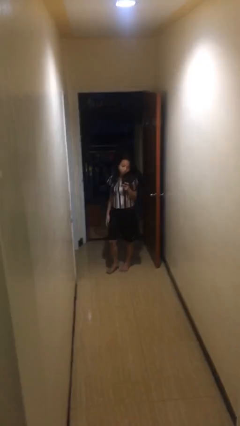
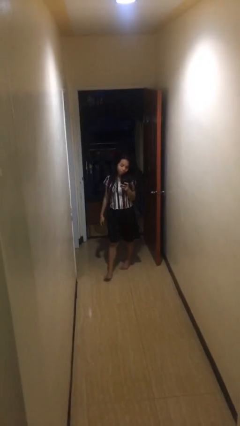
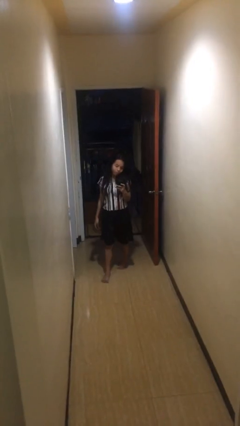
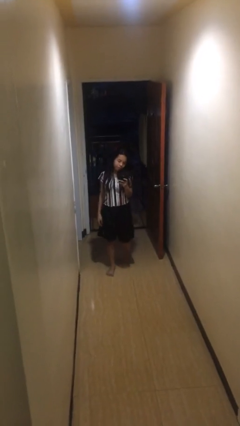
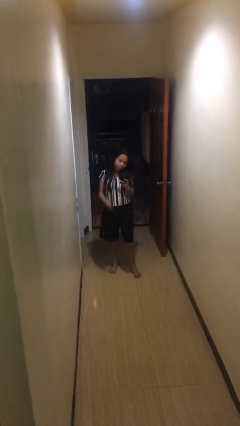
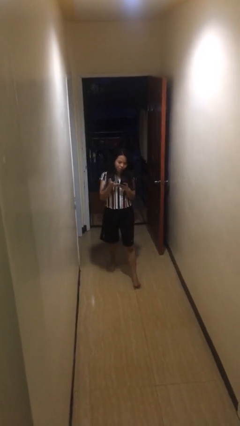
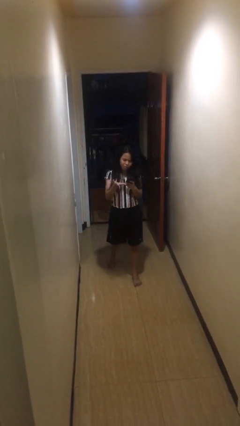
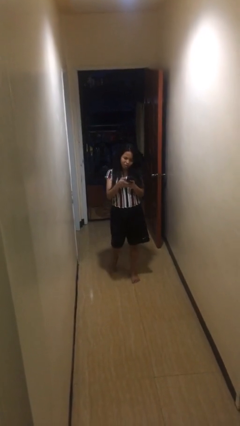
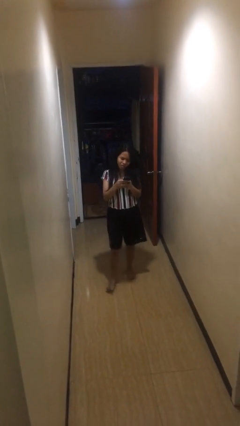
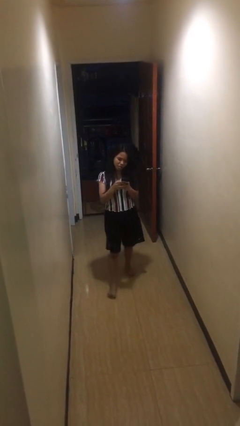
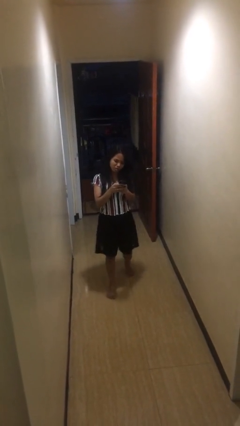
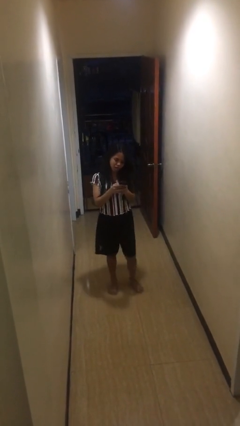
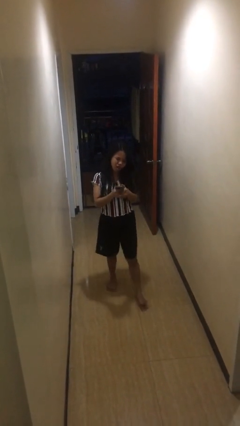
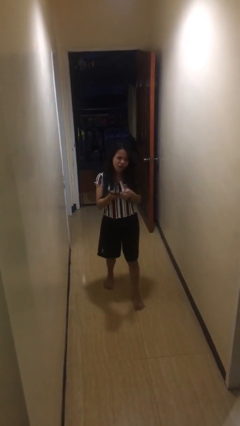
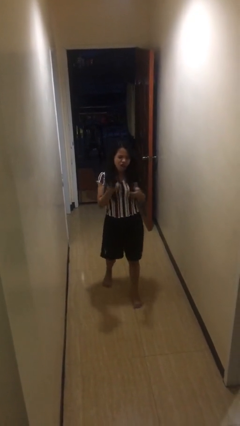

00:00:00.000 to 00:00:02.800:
person texts on phone

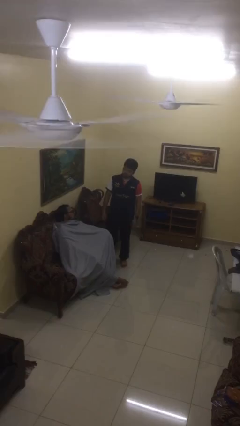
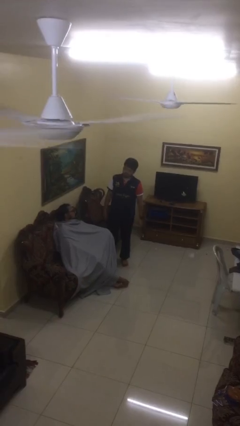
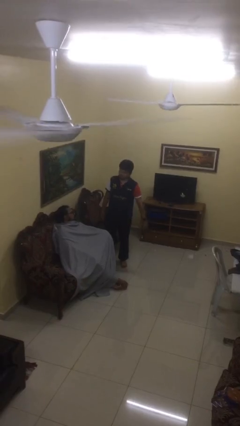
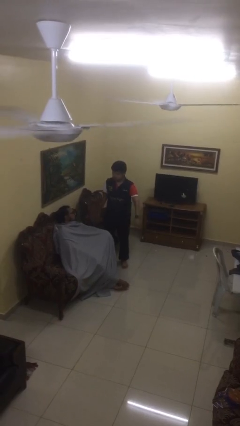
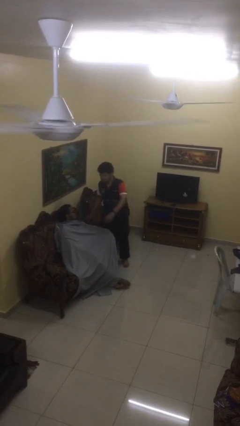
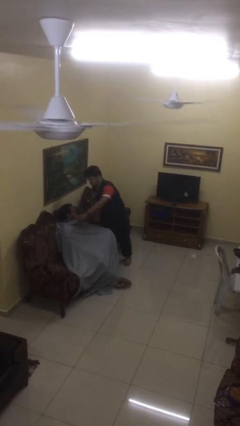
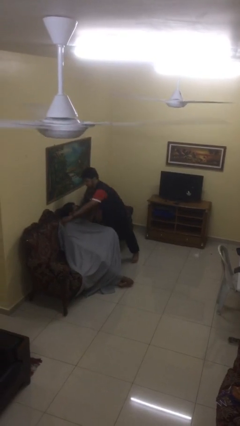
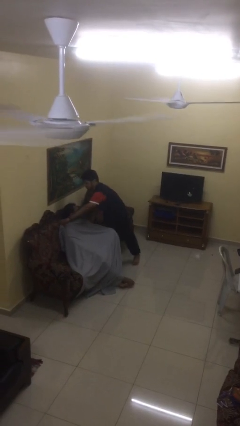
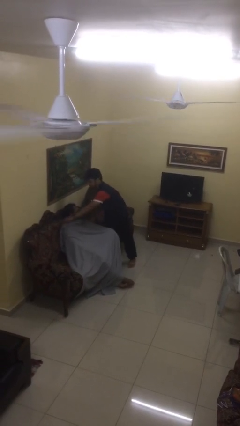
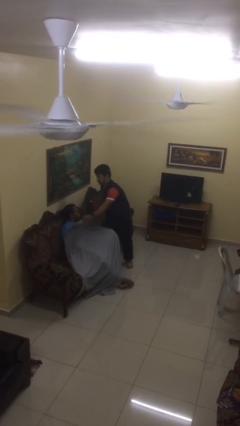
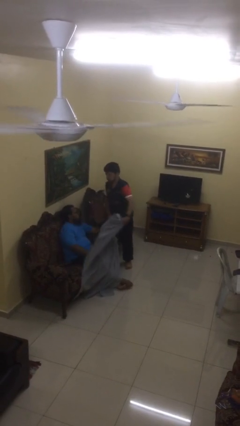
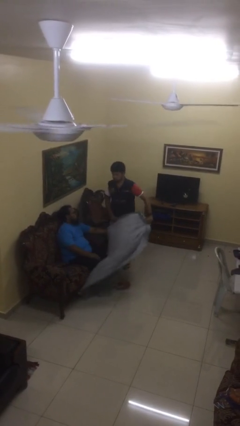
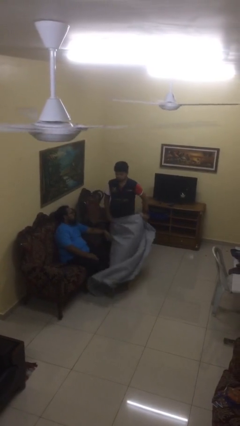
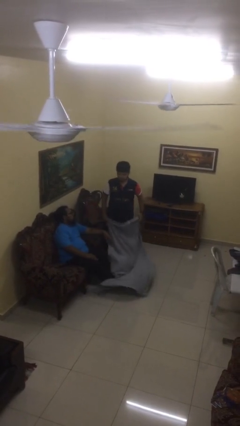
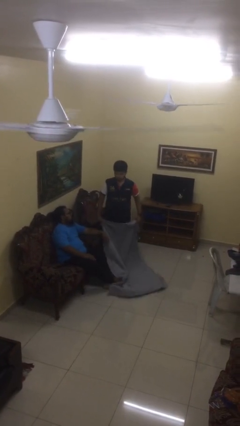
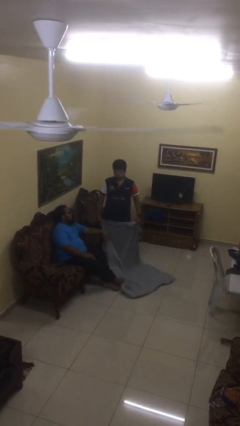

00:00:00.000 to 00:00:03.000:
person uncovers friend with blanket

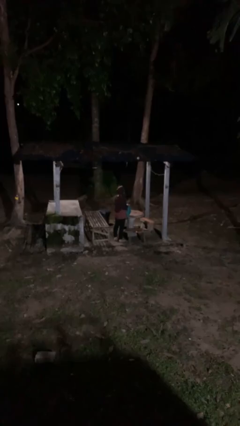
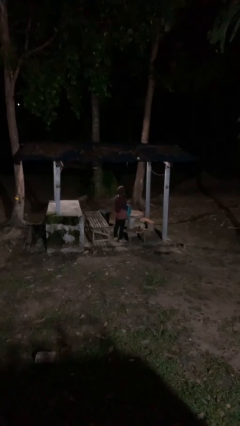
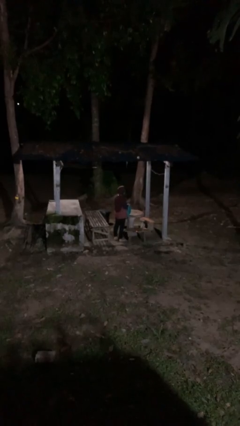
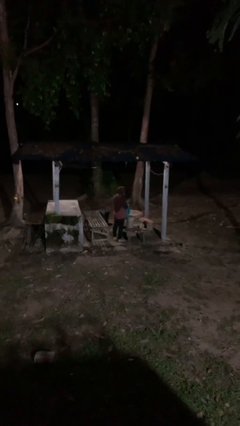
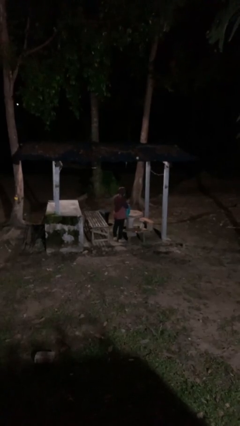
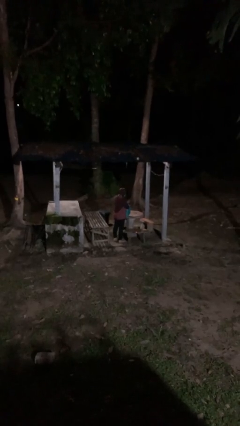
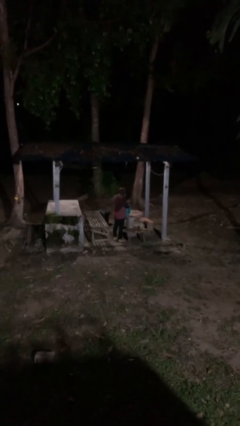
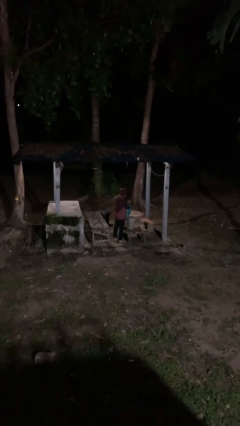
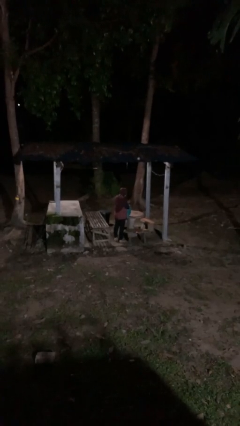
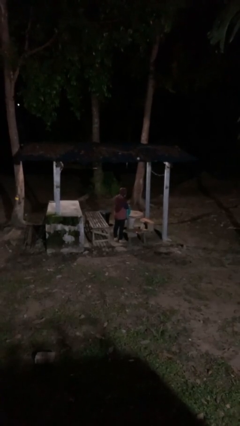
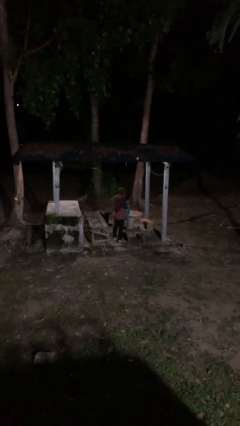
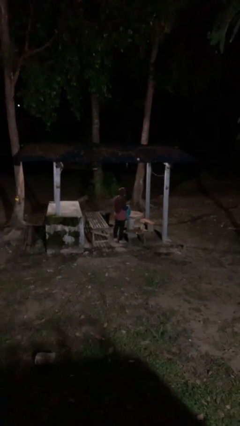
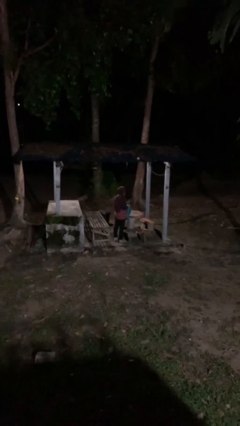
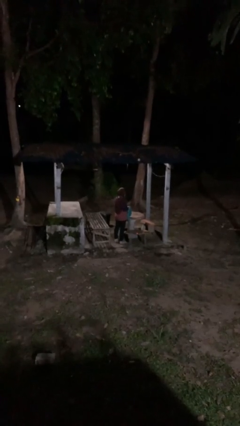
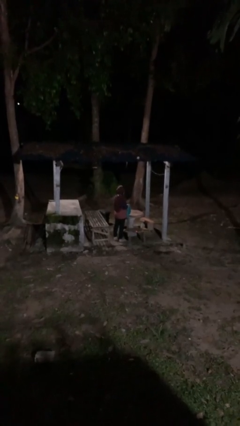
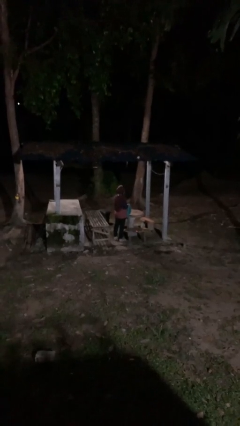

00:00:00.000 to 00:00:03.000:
person searches in bag

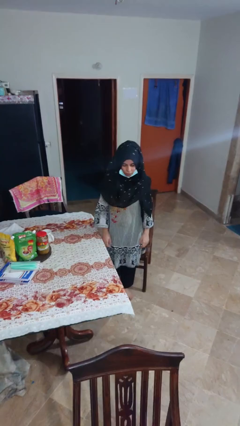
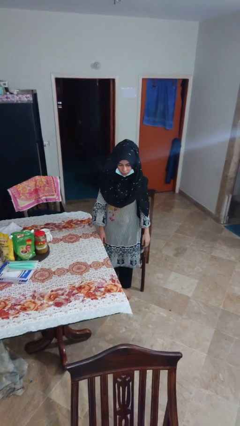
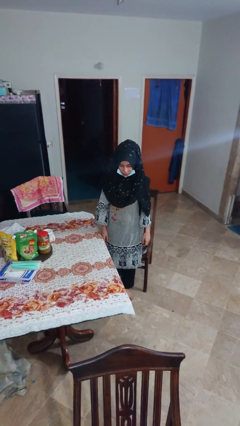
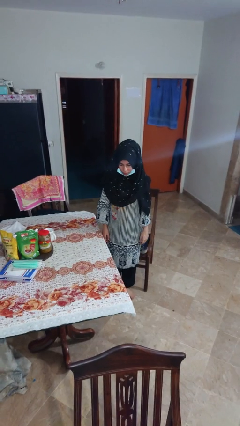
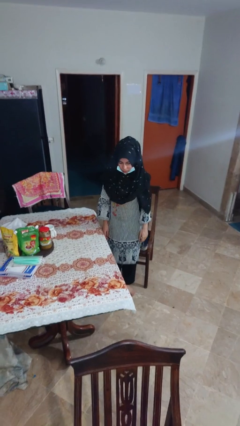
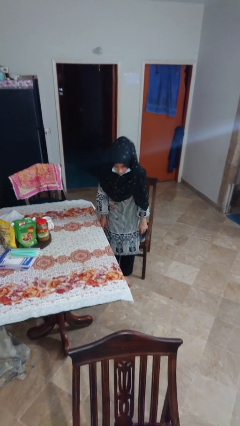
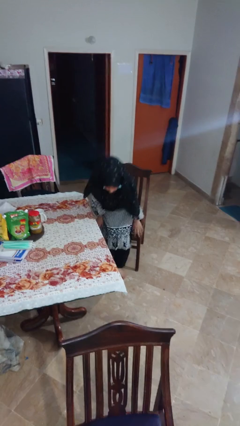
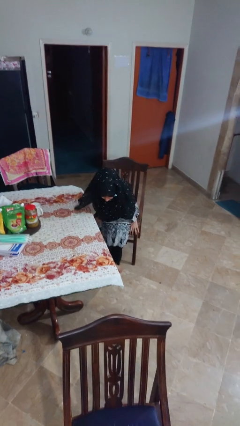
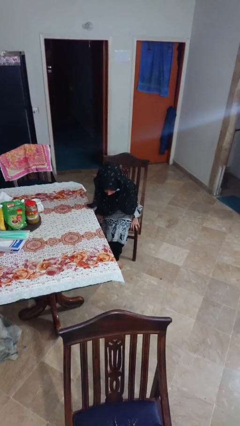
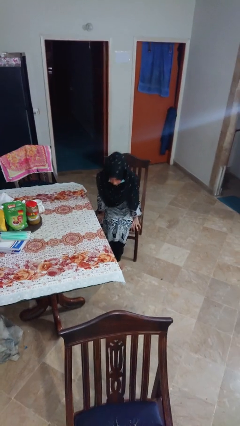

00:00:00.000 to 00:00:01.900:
person sits down

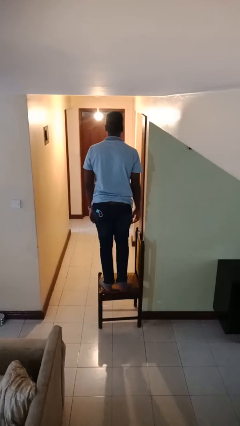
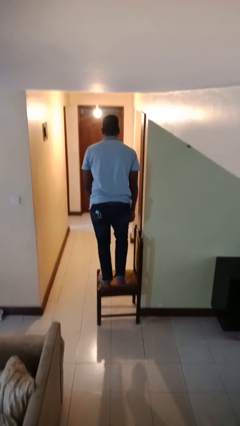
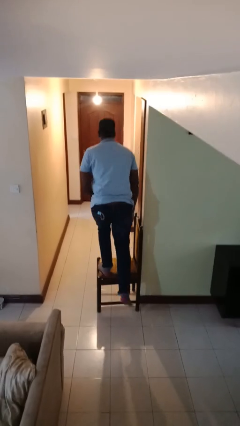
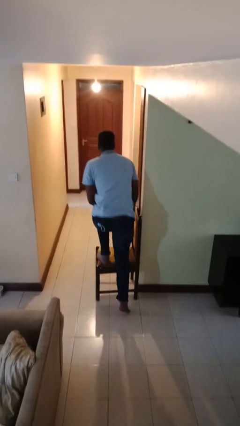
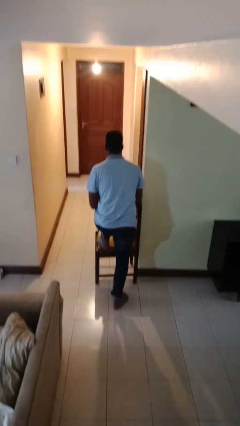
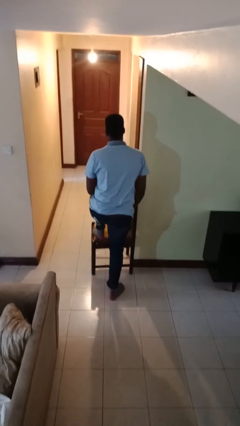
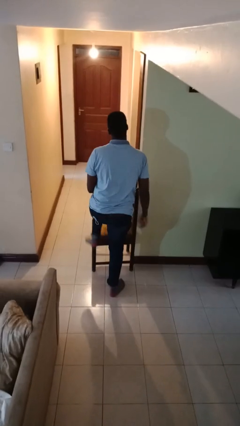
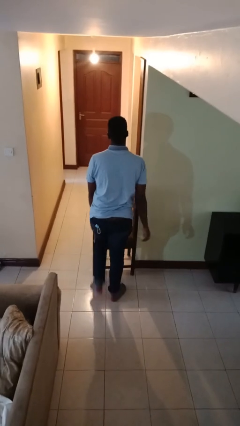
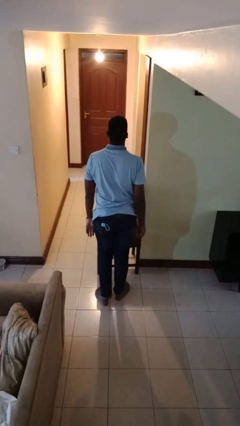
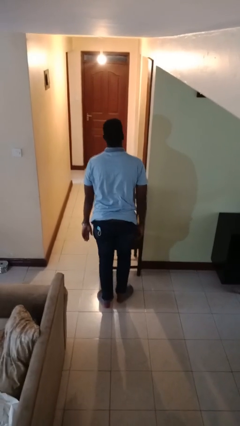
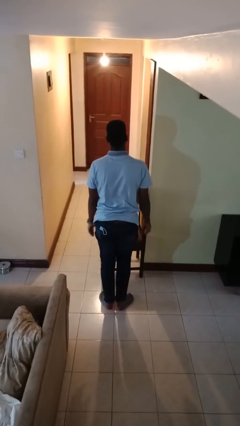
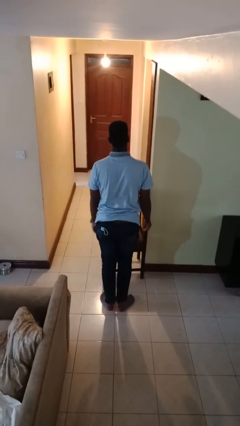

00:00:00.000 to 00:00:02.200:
person climbs off chair

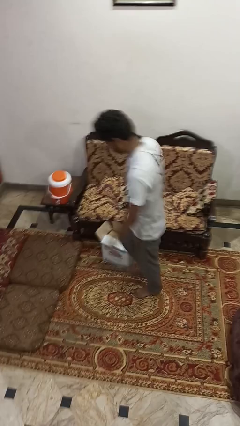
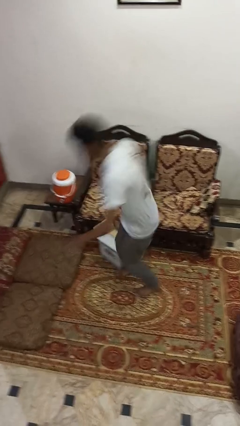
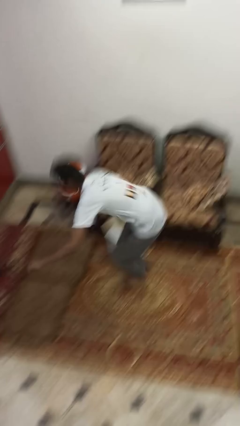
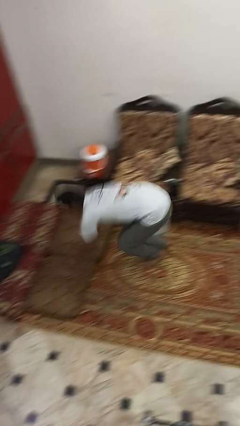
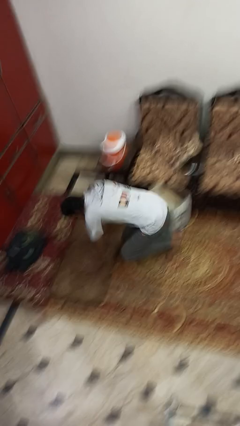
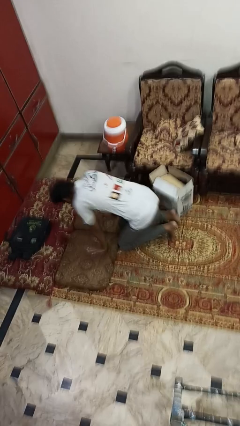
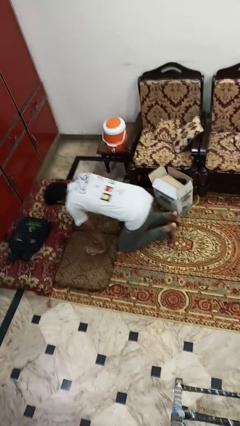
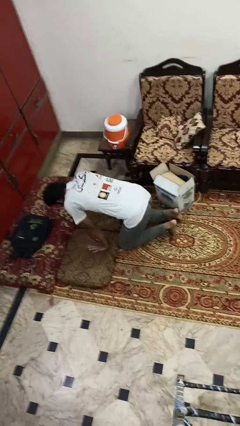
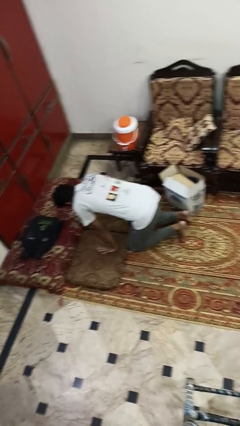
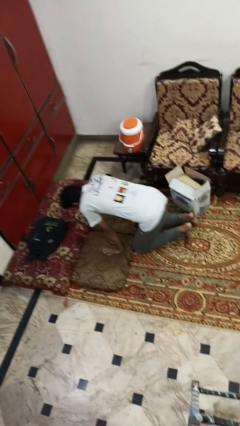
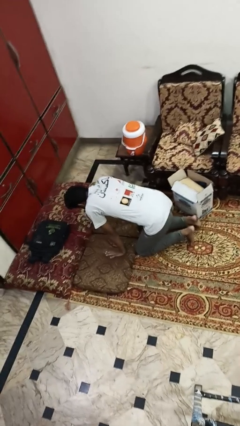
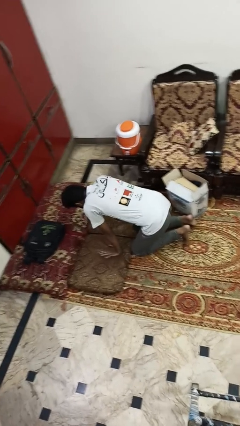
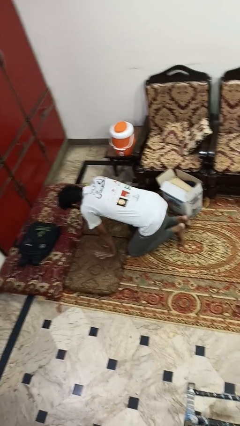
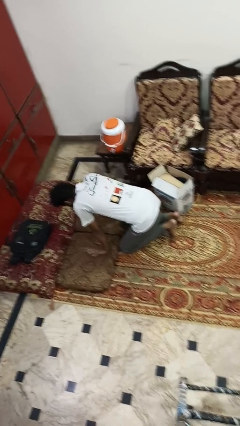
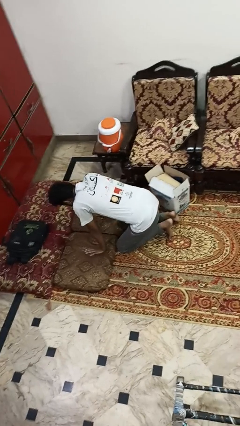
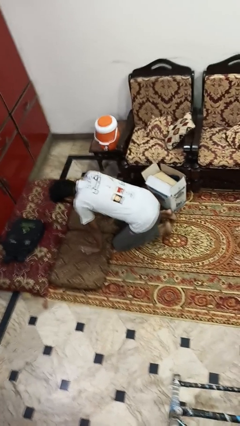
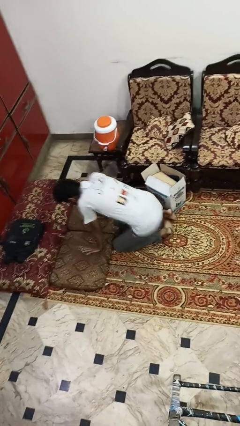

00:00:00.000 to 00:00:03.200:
person trips on object on floor

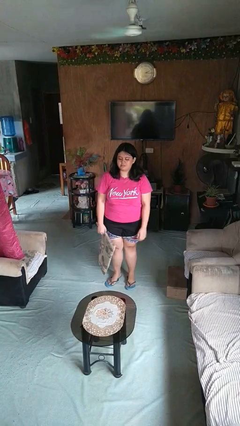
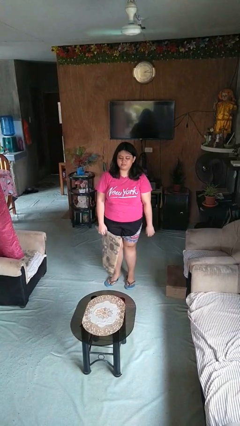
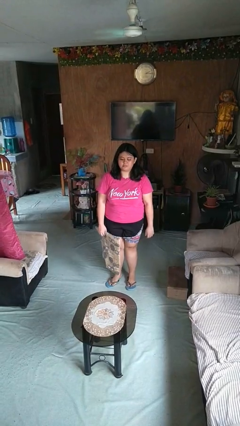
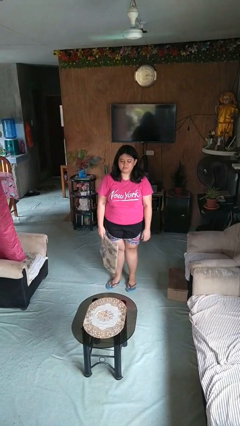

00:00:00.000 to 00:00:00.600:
person throws object on table

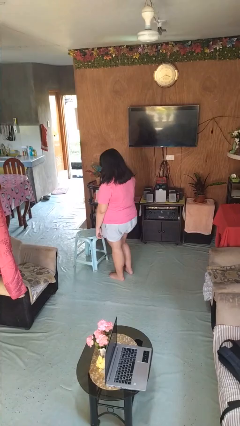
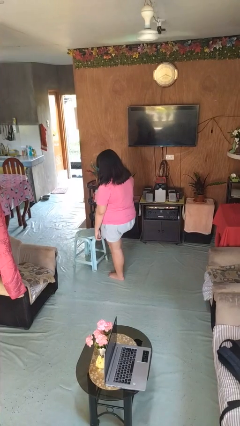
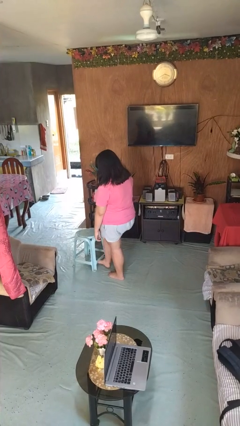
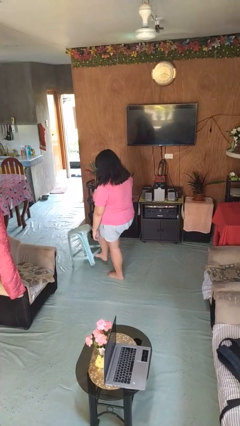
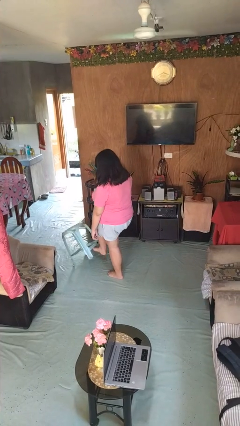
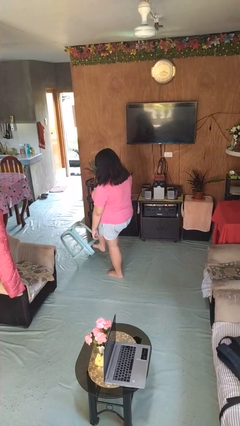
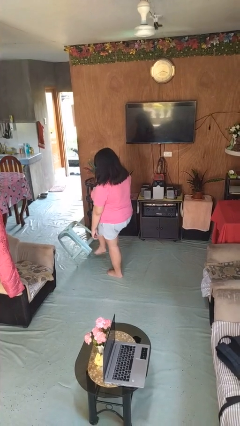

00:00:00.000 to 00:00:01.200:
person knocks over furniture
